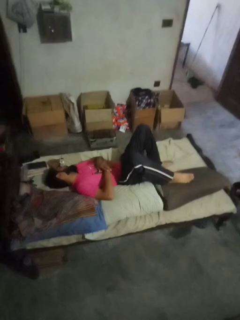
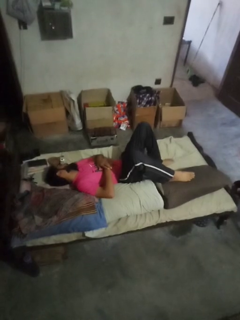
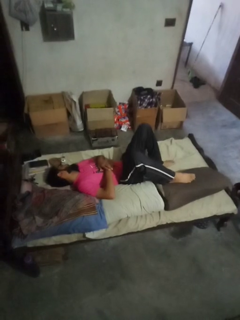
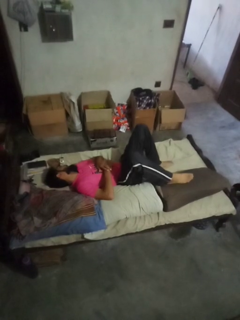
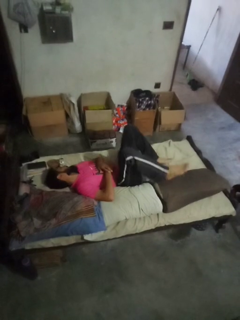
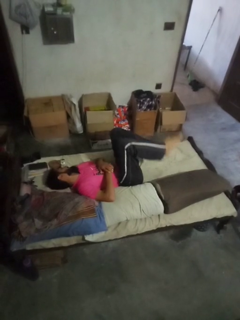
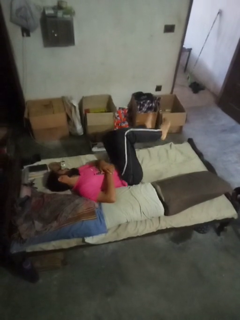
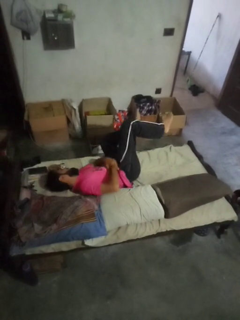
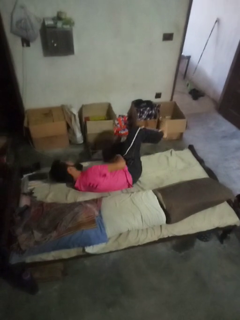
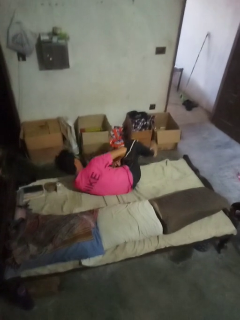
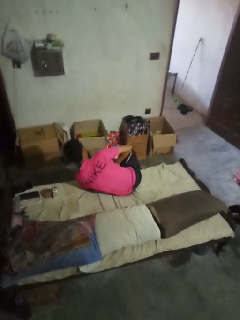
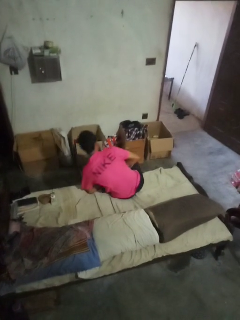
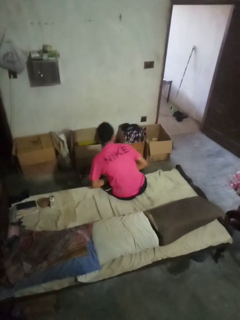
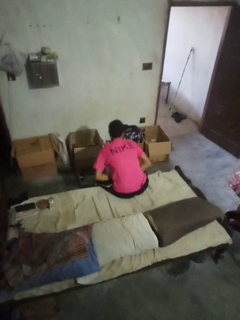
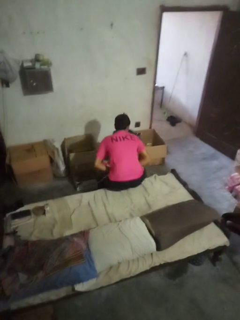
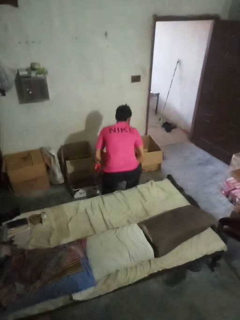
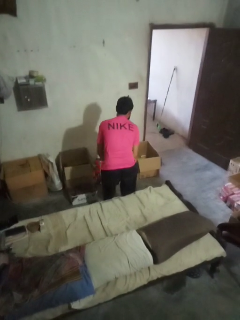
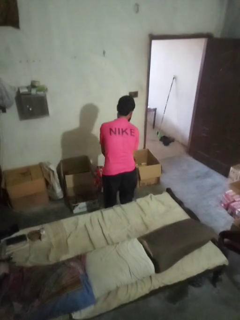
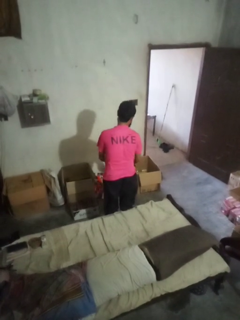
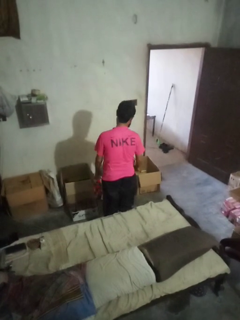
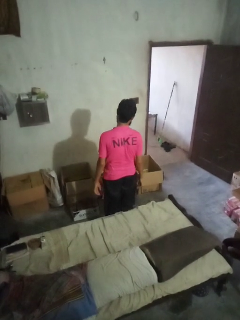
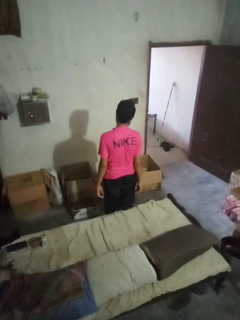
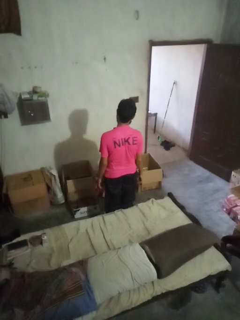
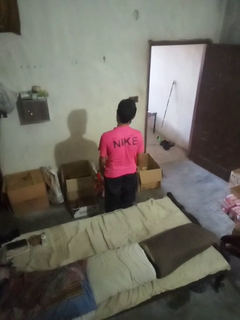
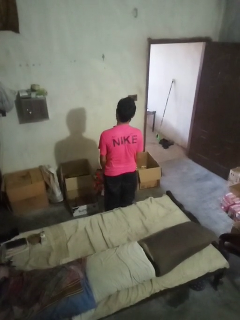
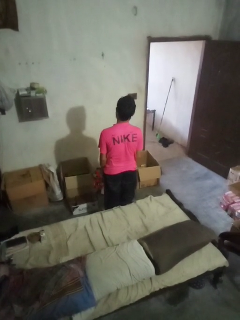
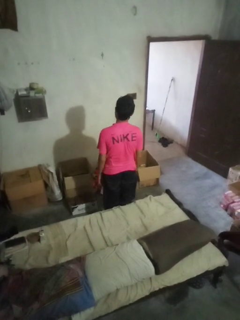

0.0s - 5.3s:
person stands up

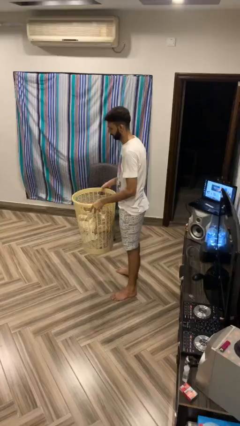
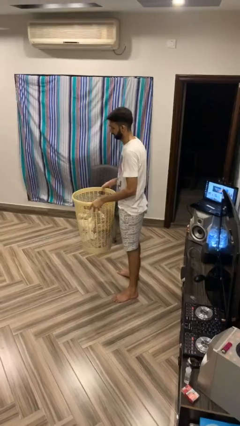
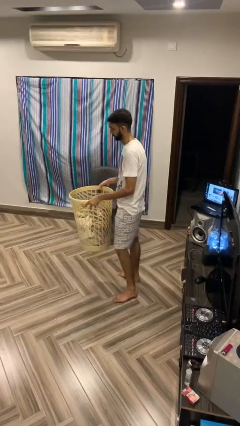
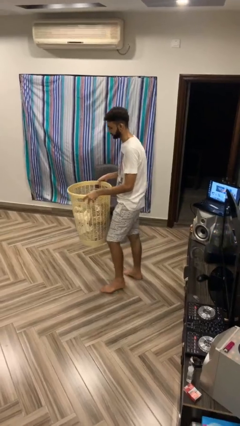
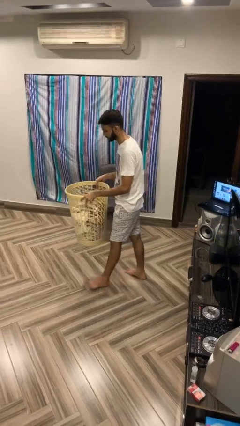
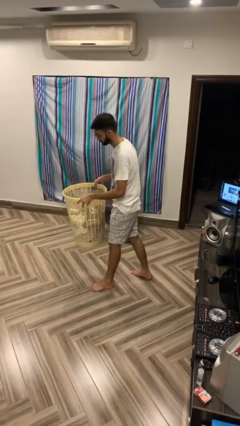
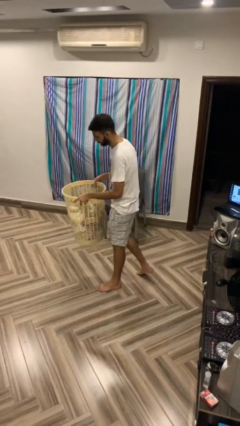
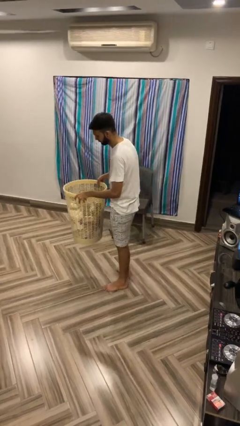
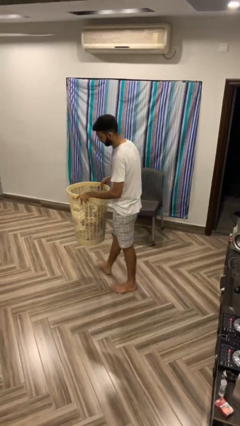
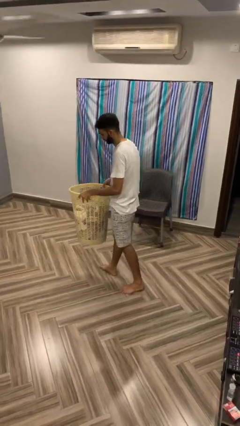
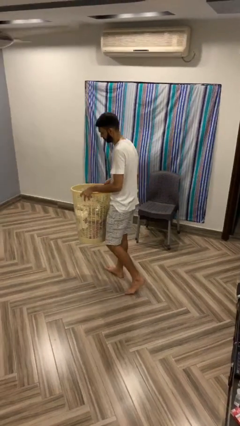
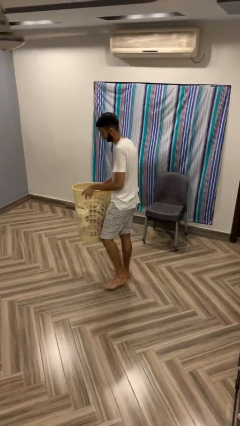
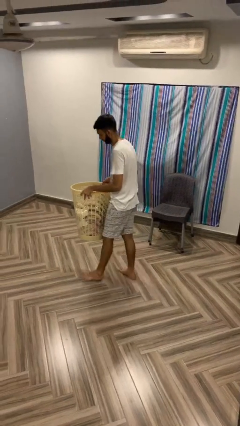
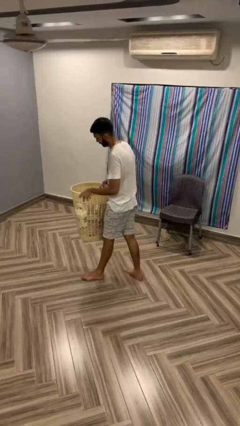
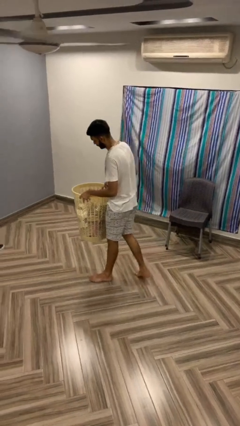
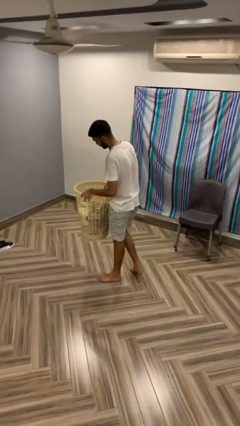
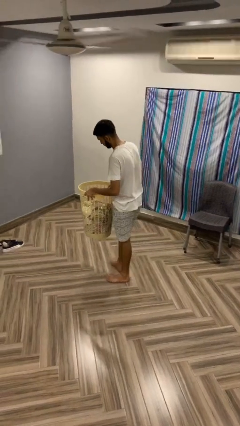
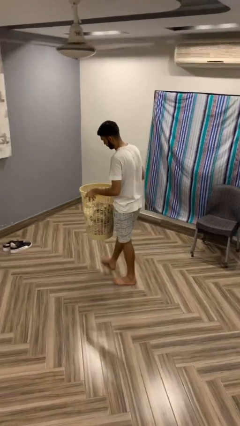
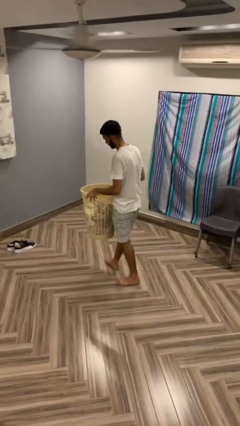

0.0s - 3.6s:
person carries heavy object

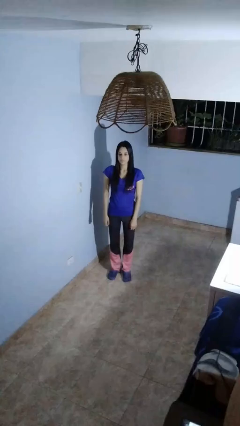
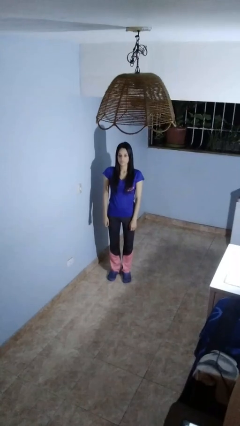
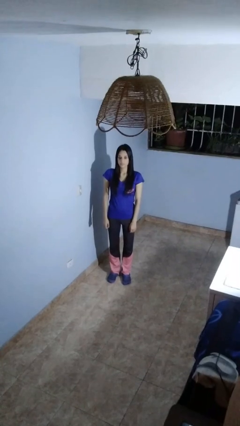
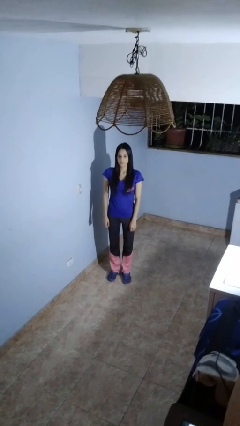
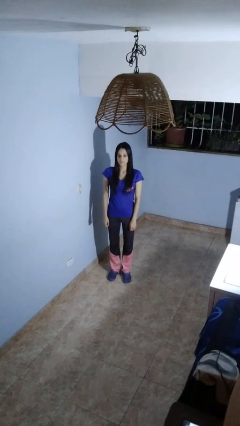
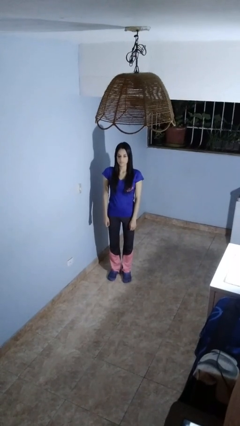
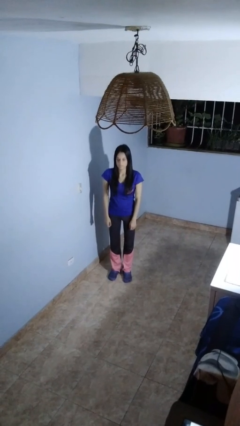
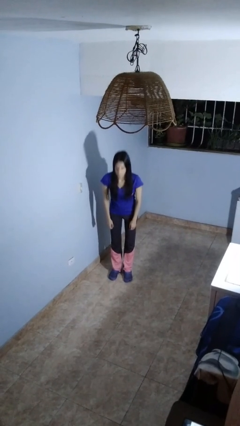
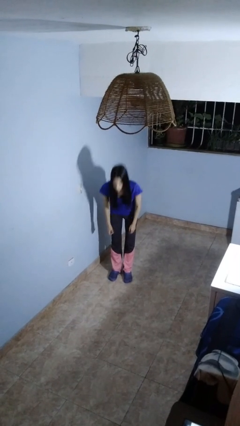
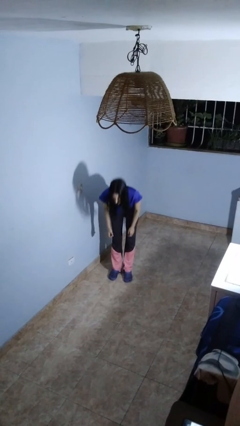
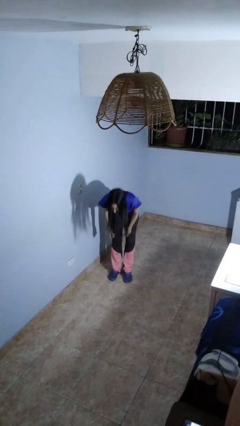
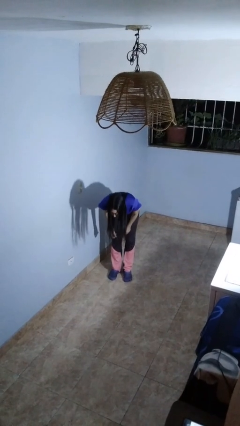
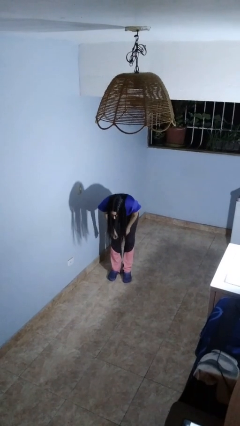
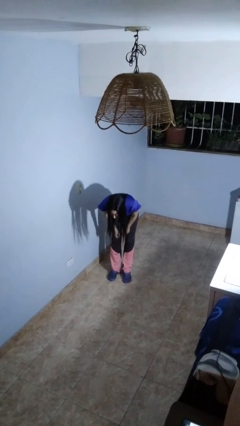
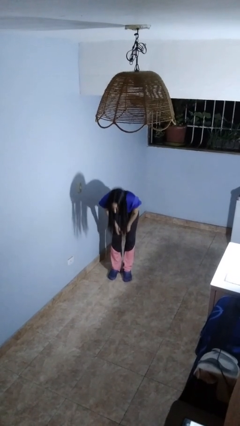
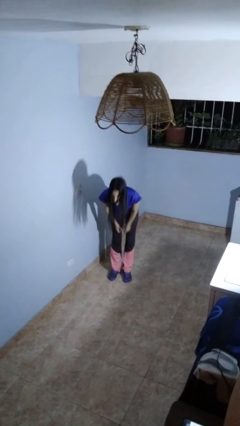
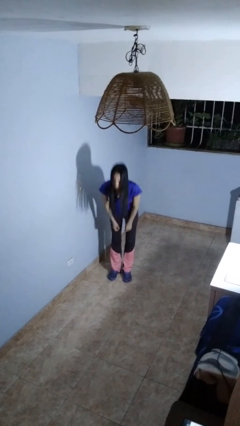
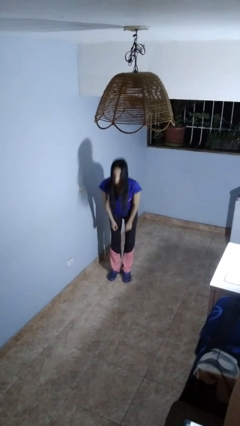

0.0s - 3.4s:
person bows

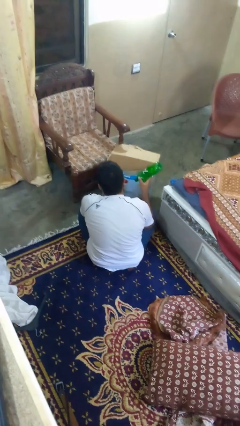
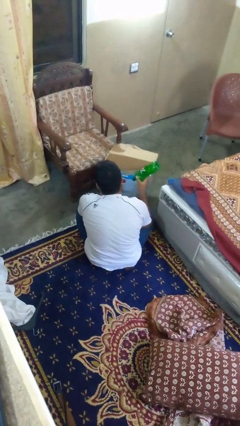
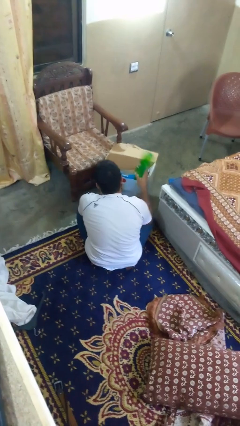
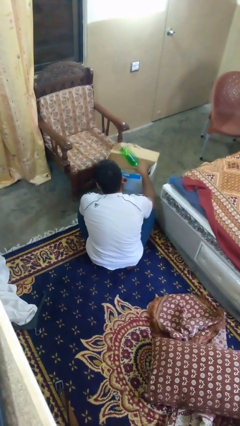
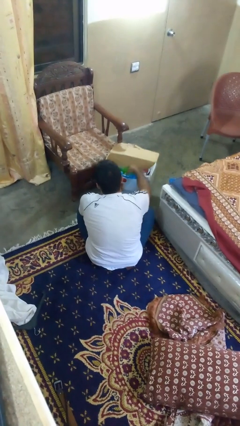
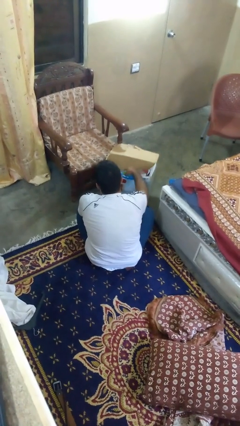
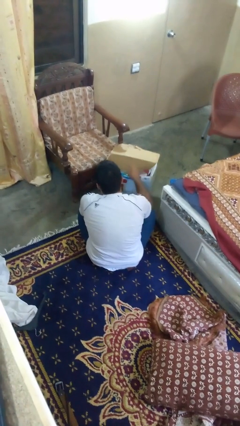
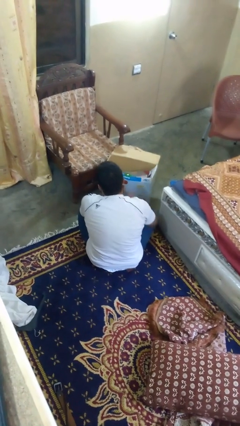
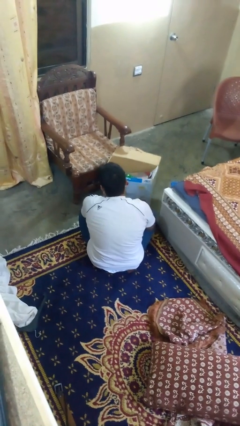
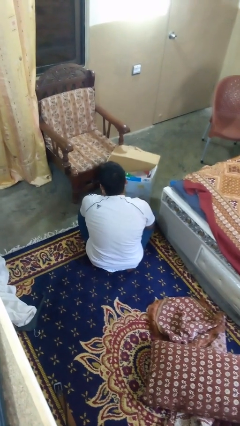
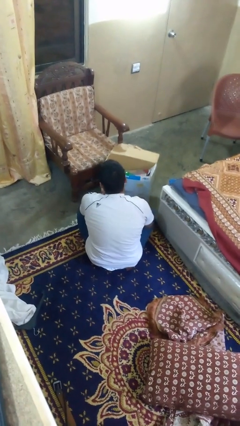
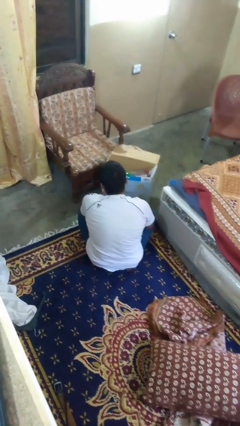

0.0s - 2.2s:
person puts object into box

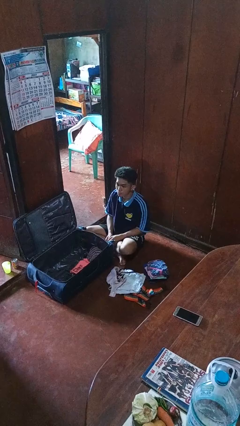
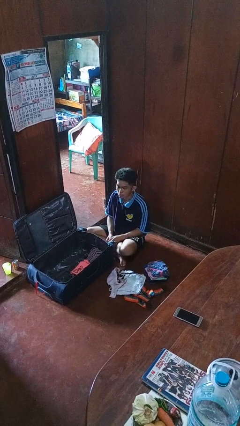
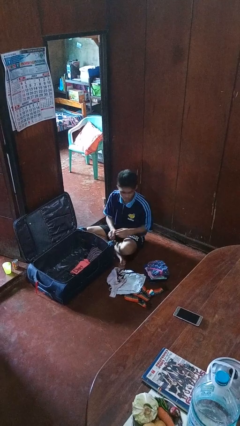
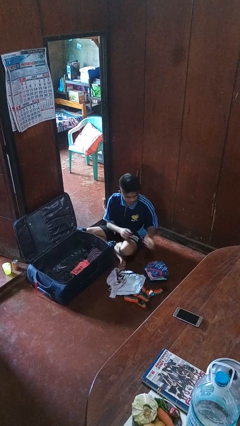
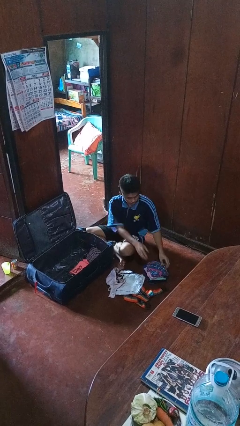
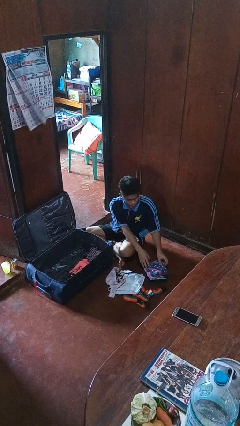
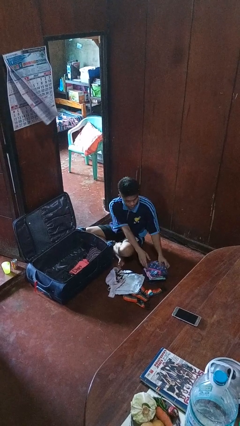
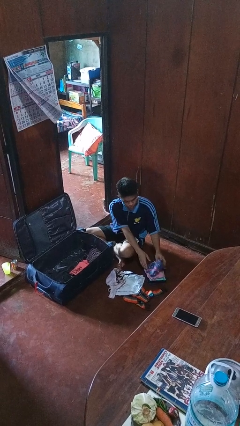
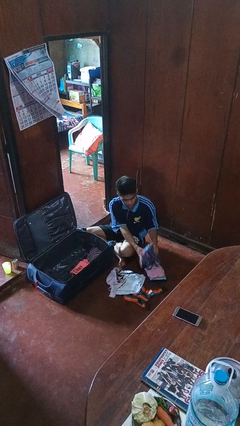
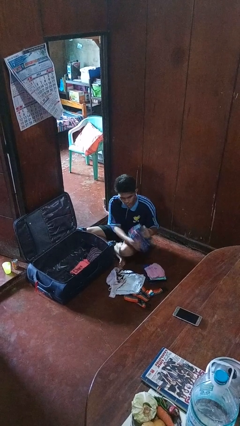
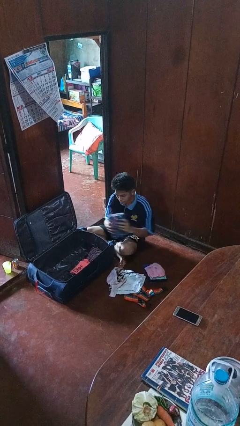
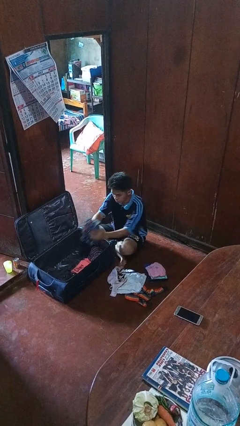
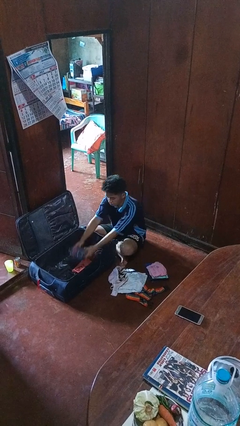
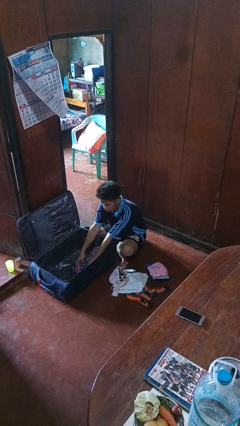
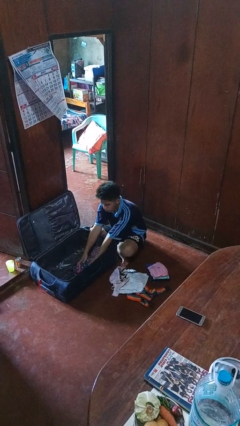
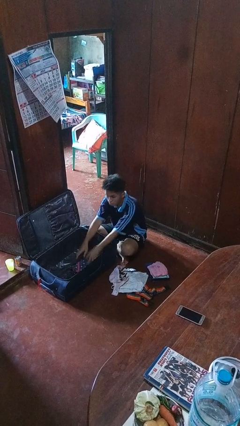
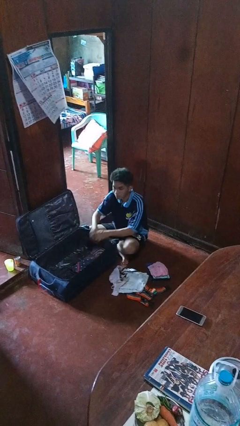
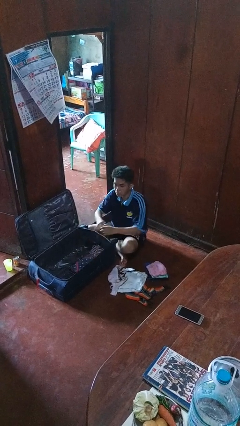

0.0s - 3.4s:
person loads clothes into suitcase

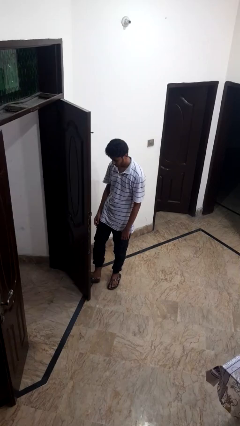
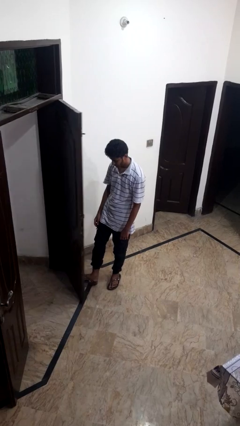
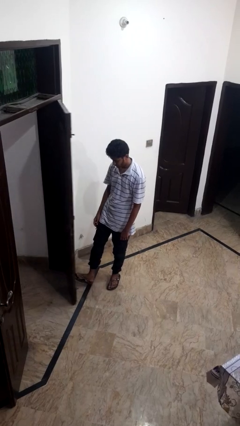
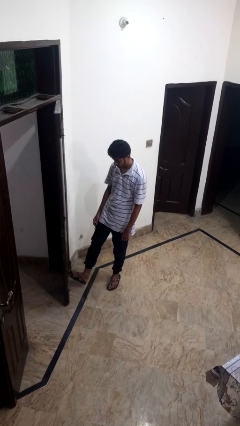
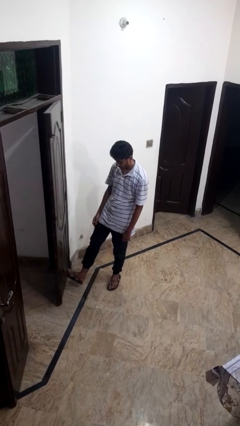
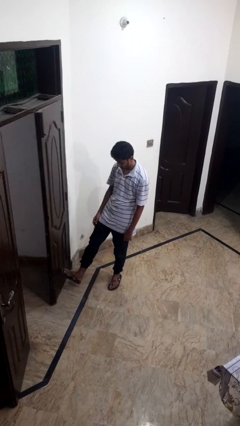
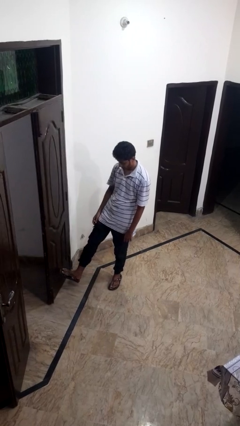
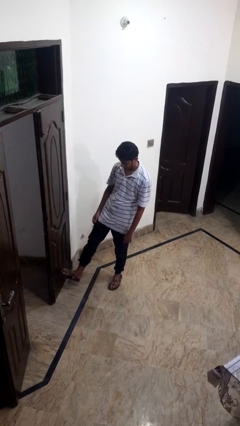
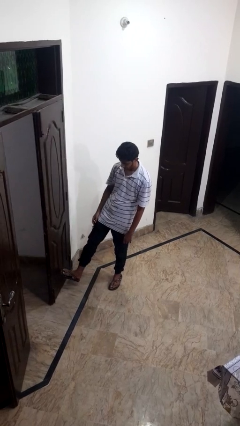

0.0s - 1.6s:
person closes door with foot
